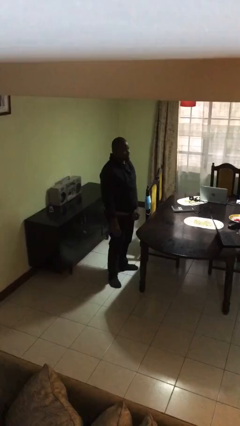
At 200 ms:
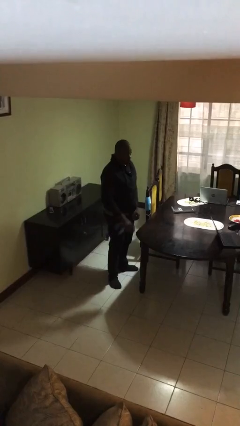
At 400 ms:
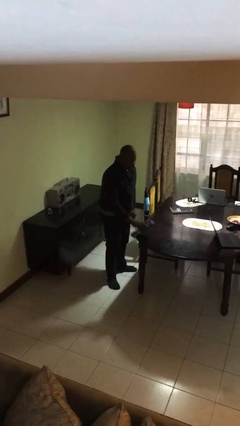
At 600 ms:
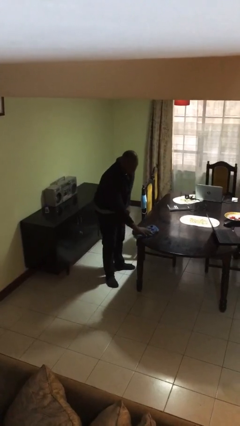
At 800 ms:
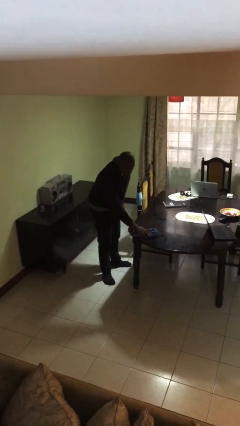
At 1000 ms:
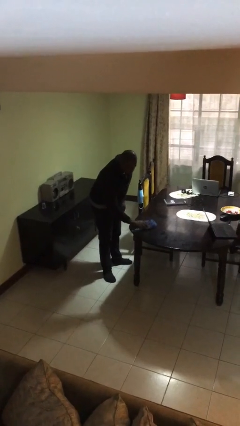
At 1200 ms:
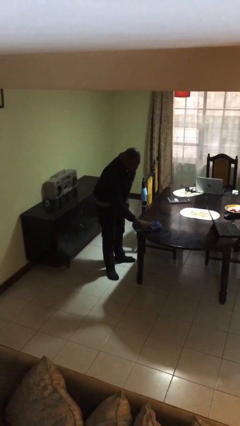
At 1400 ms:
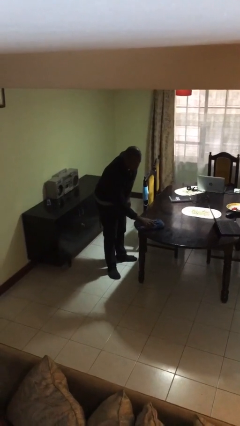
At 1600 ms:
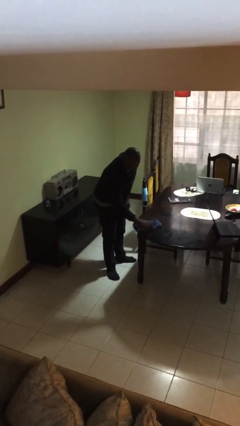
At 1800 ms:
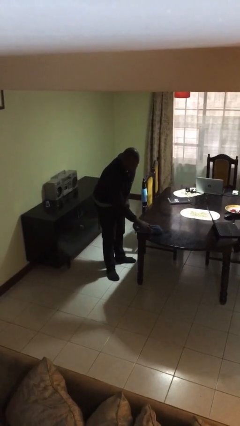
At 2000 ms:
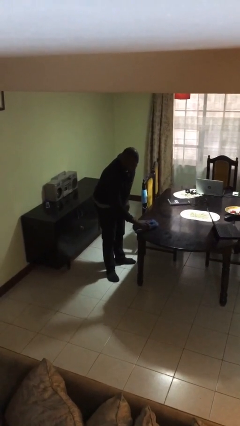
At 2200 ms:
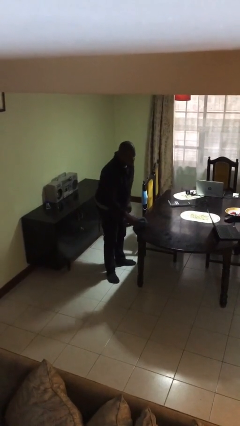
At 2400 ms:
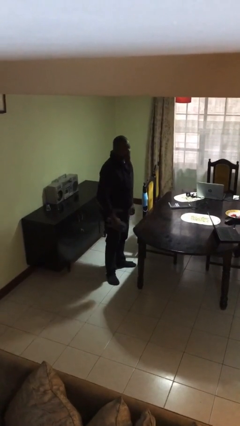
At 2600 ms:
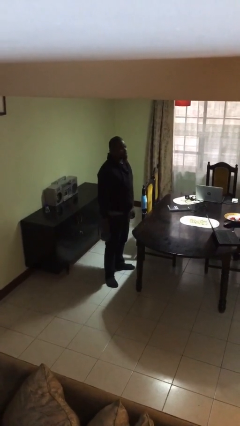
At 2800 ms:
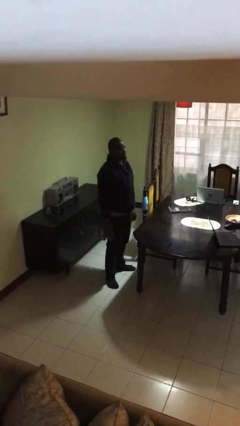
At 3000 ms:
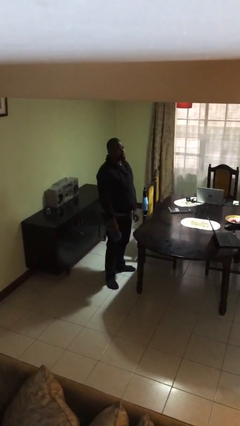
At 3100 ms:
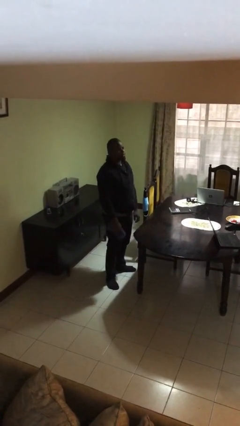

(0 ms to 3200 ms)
person cleans table with rag

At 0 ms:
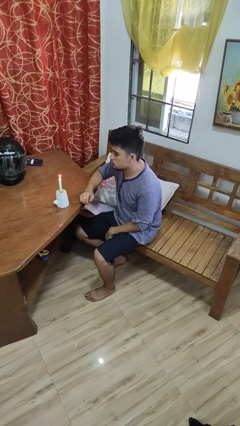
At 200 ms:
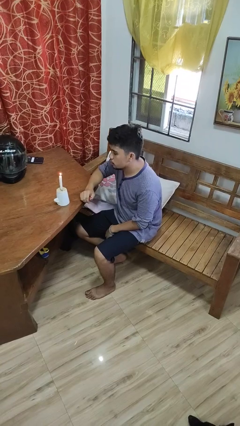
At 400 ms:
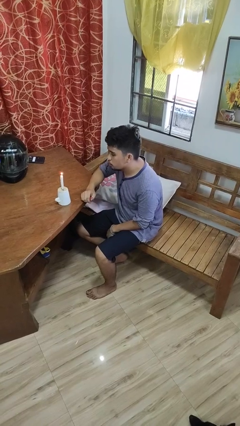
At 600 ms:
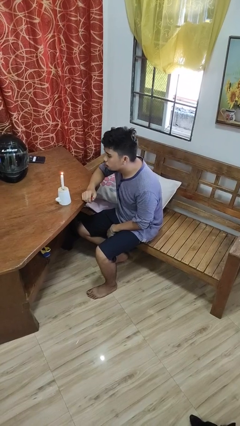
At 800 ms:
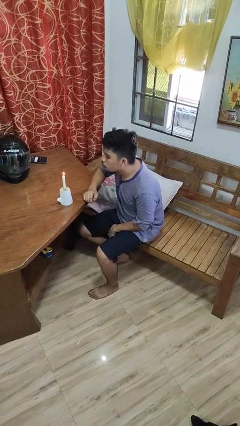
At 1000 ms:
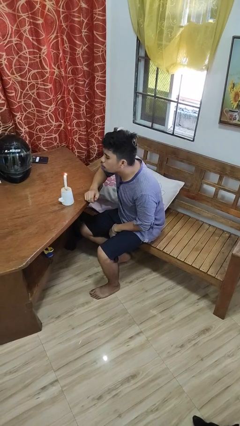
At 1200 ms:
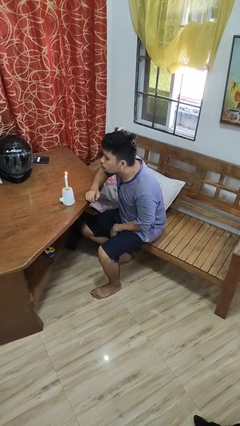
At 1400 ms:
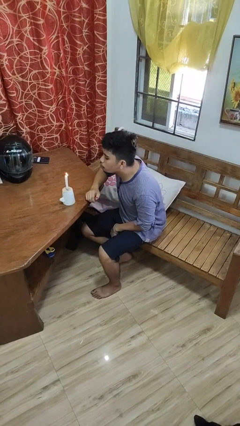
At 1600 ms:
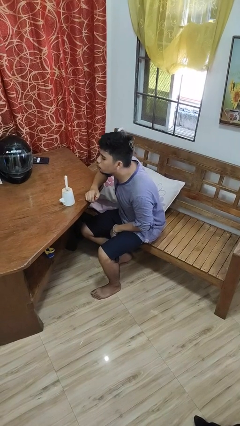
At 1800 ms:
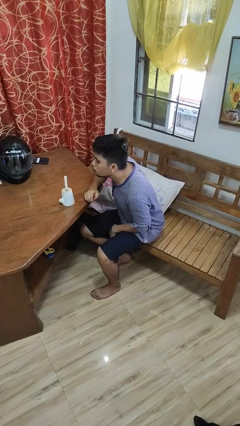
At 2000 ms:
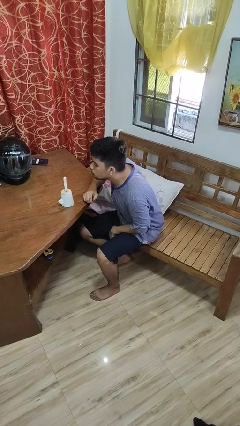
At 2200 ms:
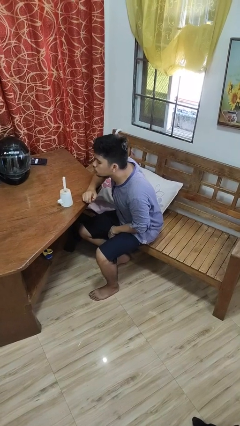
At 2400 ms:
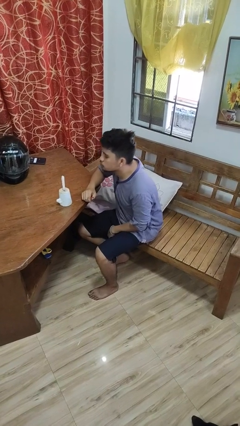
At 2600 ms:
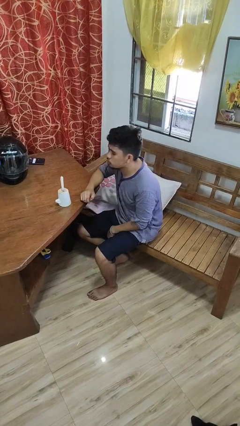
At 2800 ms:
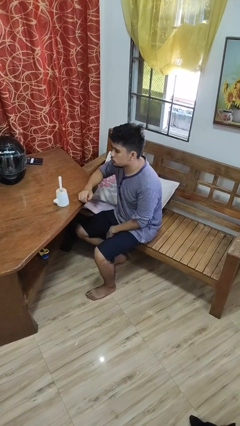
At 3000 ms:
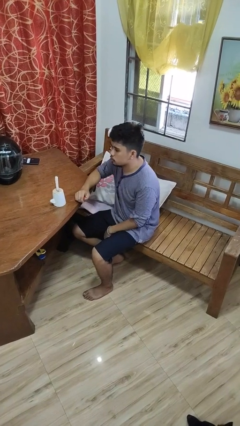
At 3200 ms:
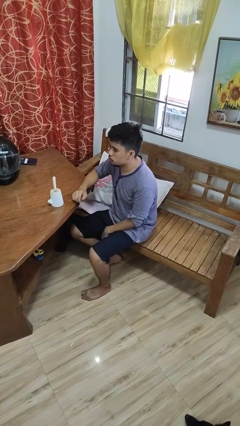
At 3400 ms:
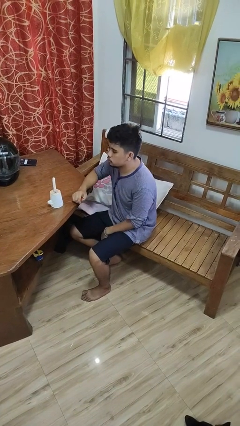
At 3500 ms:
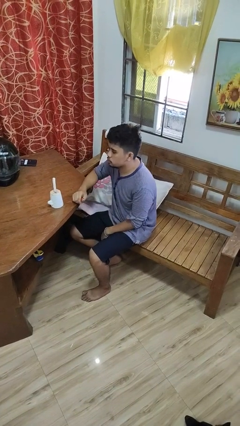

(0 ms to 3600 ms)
person extinguishes candle

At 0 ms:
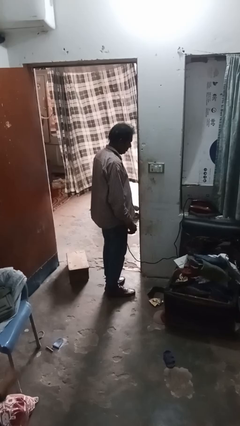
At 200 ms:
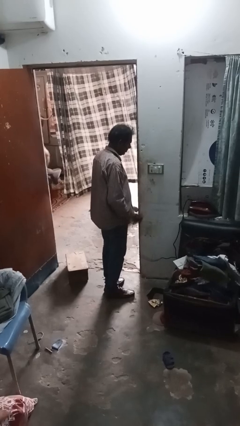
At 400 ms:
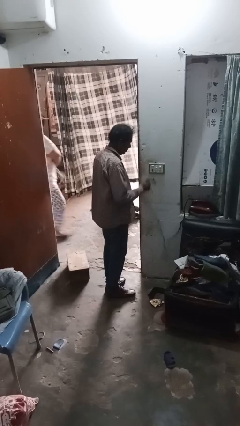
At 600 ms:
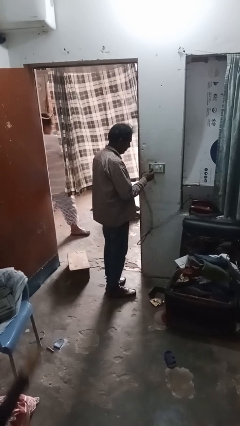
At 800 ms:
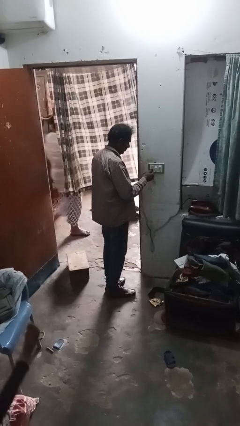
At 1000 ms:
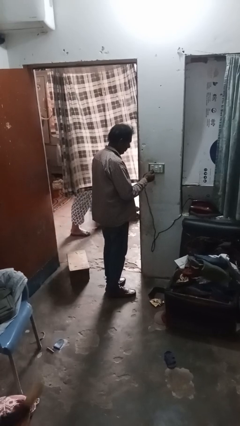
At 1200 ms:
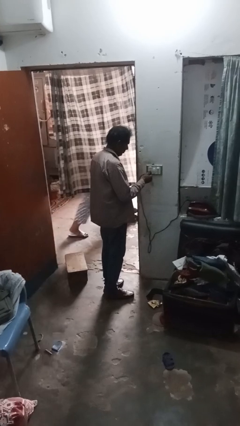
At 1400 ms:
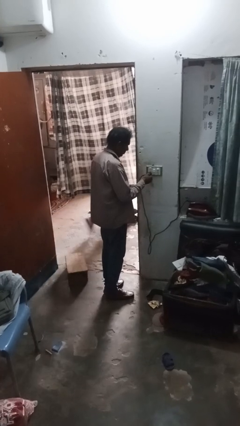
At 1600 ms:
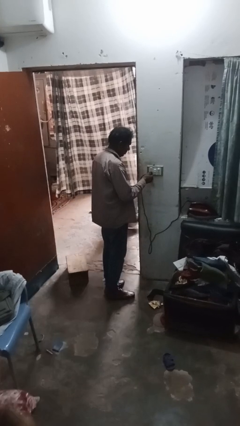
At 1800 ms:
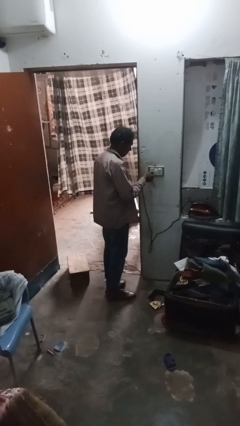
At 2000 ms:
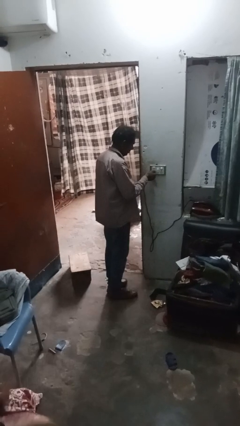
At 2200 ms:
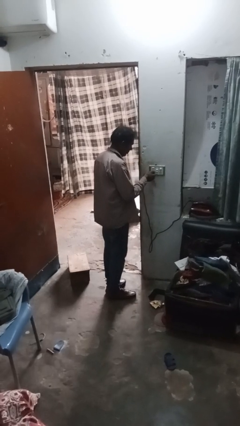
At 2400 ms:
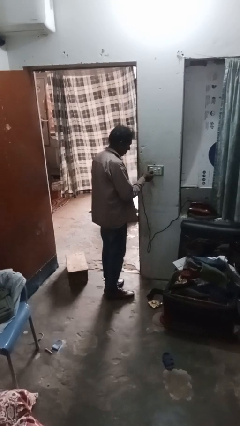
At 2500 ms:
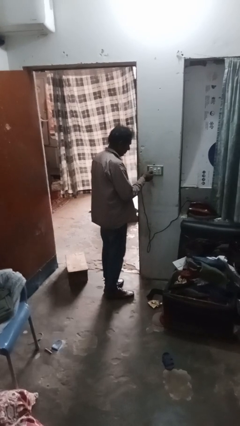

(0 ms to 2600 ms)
person plugs into electrical socket

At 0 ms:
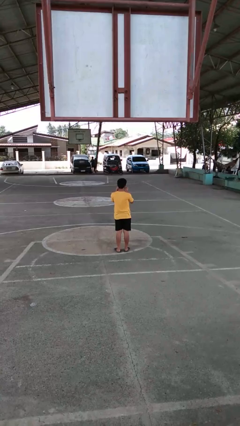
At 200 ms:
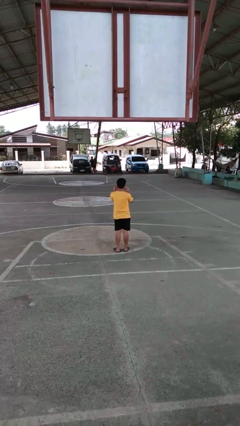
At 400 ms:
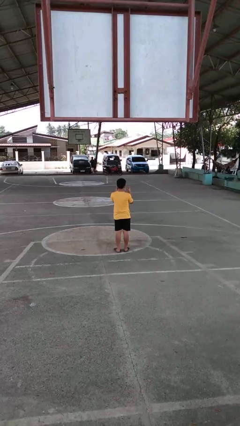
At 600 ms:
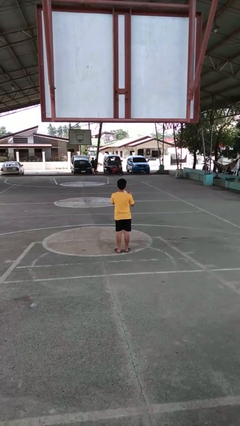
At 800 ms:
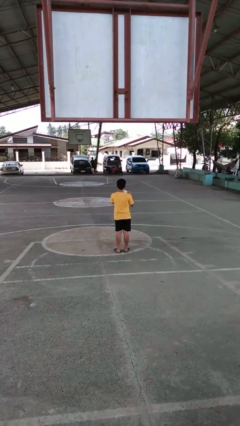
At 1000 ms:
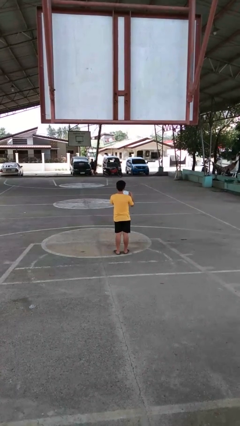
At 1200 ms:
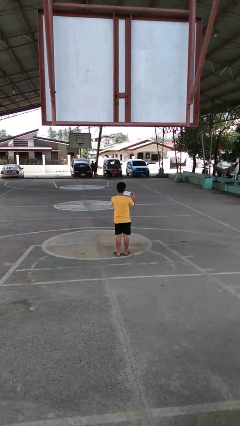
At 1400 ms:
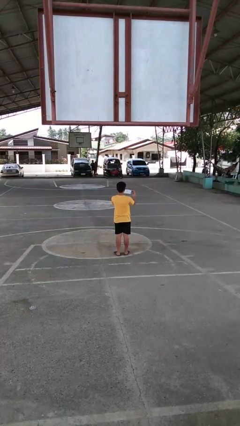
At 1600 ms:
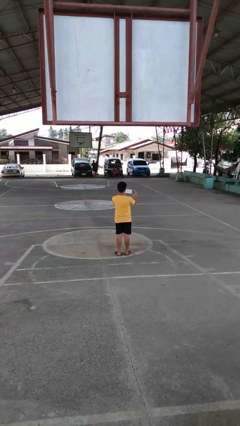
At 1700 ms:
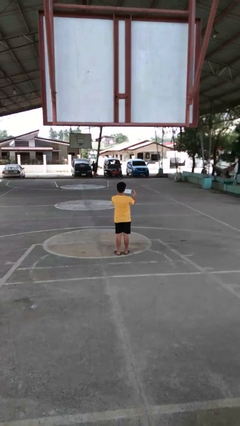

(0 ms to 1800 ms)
person takes off facemask

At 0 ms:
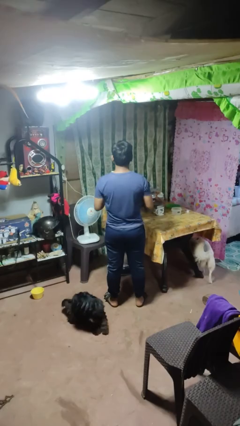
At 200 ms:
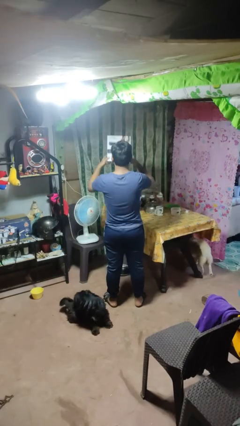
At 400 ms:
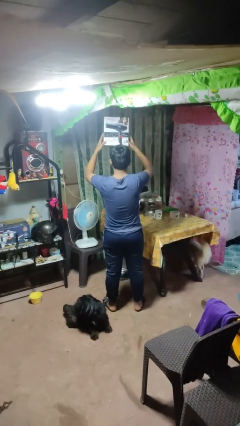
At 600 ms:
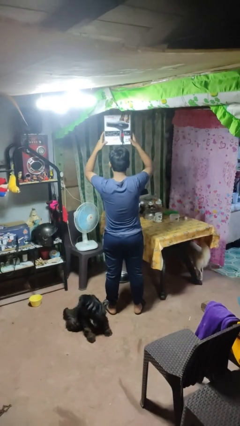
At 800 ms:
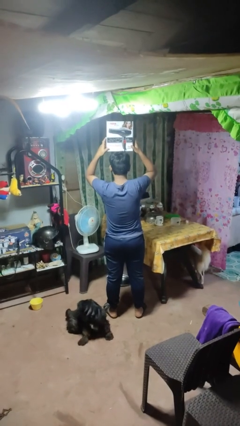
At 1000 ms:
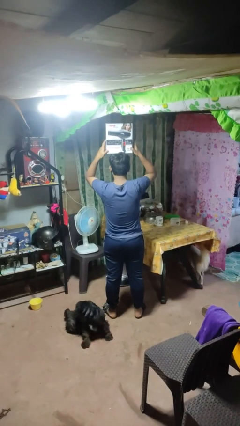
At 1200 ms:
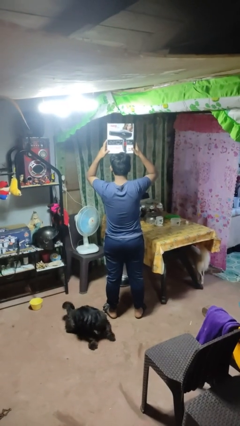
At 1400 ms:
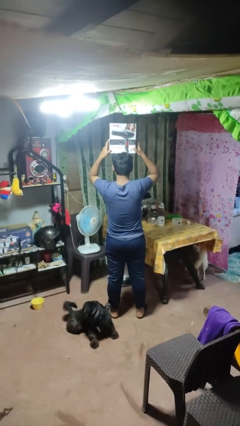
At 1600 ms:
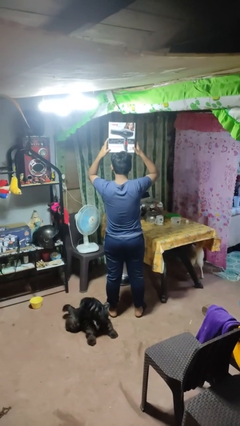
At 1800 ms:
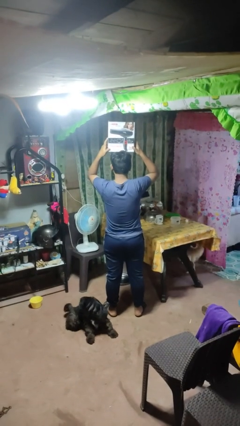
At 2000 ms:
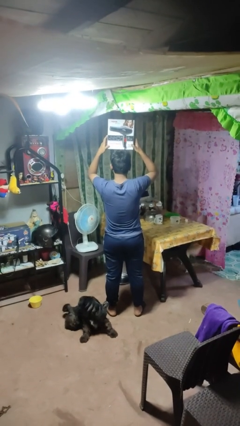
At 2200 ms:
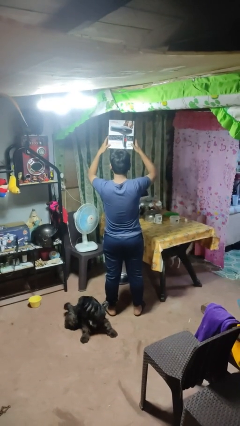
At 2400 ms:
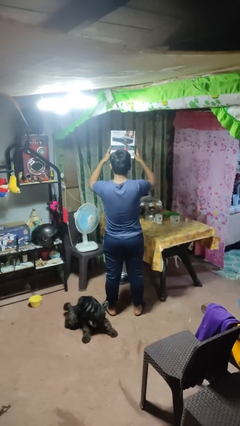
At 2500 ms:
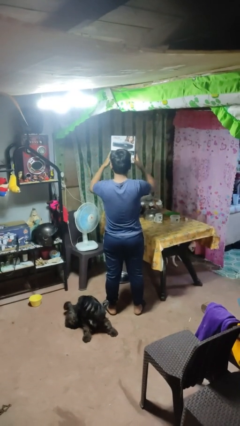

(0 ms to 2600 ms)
person holds object above head

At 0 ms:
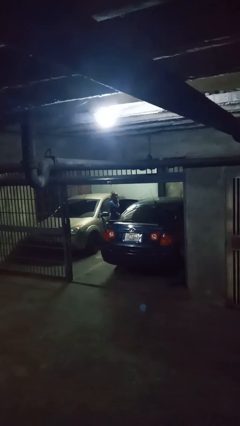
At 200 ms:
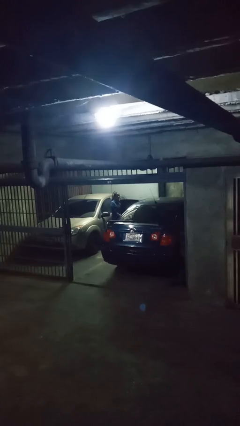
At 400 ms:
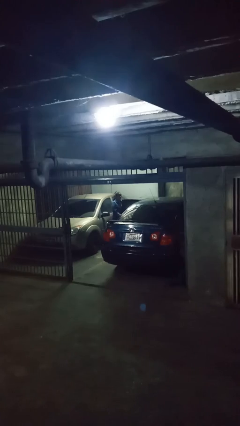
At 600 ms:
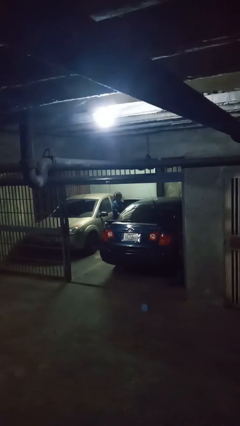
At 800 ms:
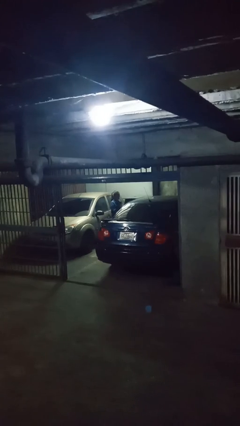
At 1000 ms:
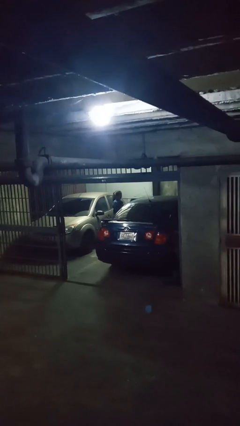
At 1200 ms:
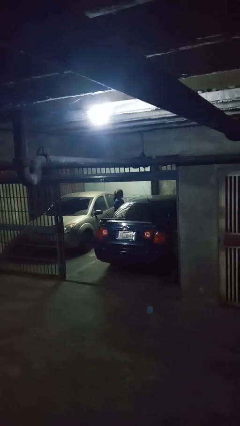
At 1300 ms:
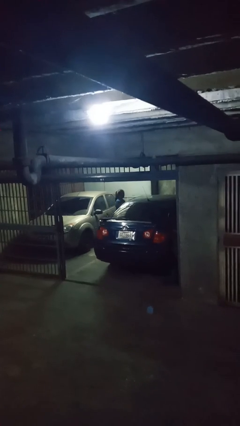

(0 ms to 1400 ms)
person closes car door

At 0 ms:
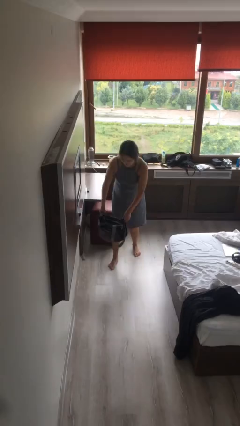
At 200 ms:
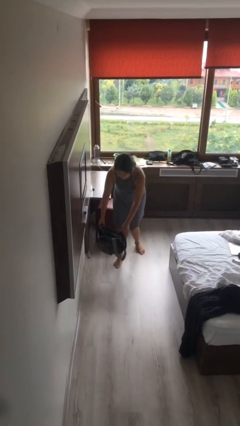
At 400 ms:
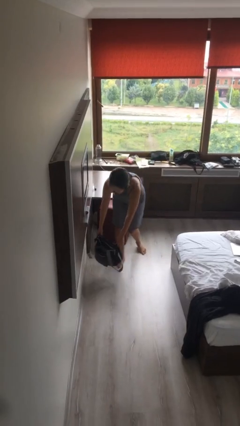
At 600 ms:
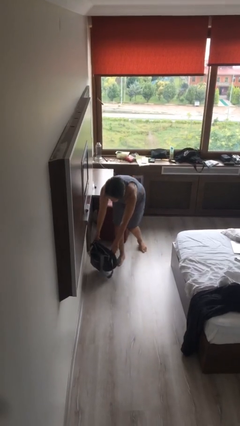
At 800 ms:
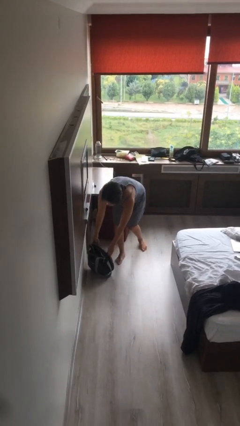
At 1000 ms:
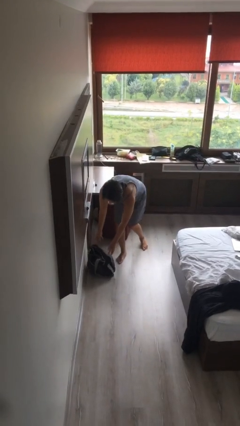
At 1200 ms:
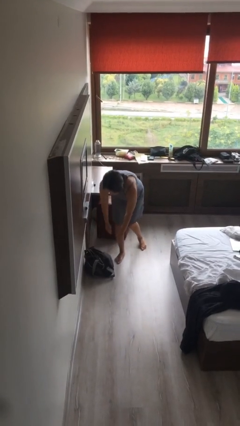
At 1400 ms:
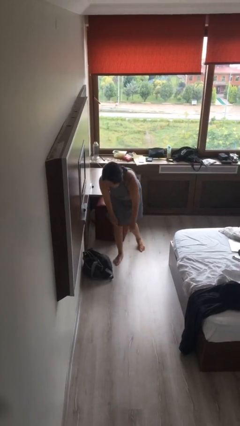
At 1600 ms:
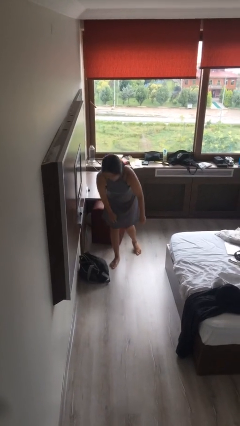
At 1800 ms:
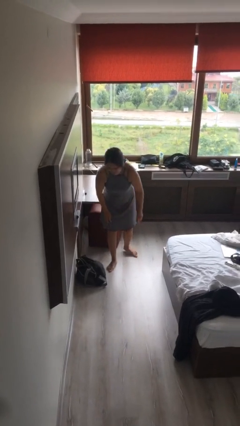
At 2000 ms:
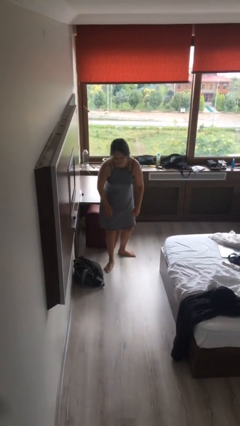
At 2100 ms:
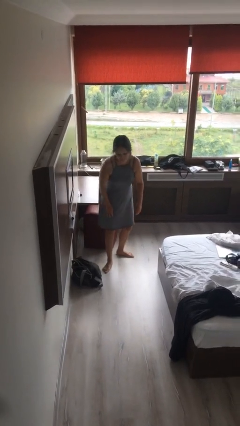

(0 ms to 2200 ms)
person puts down object on floor
